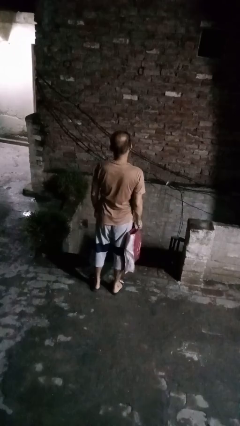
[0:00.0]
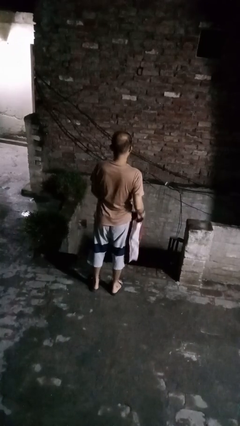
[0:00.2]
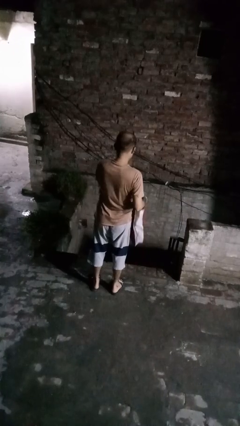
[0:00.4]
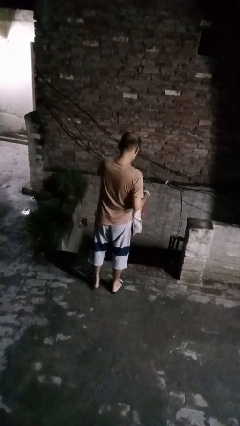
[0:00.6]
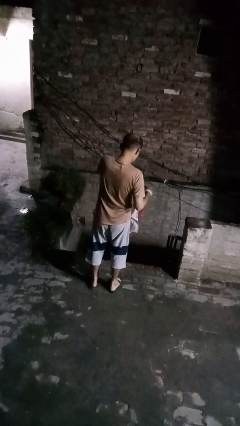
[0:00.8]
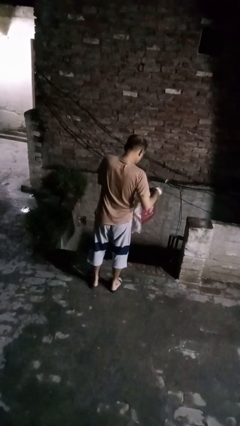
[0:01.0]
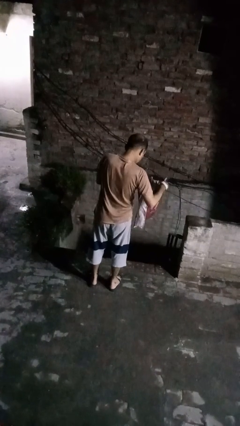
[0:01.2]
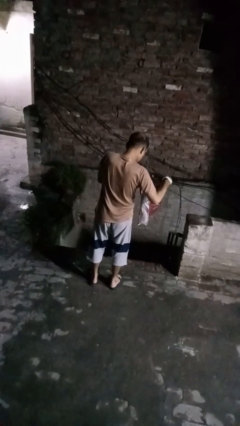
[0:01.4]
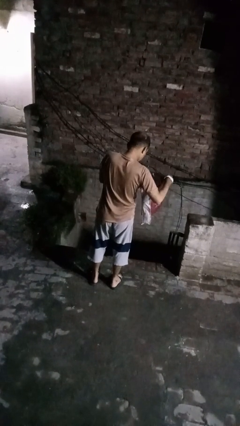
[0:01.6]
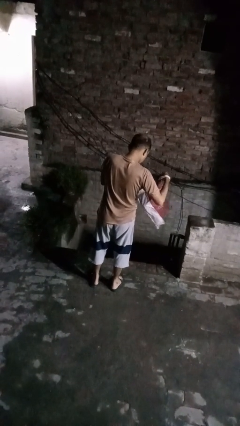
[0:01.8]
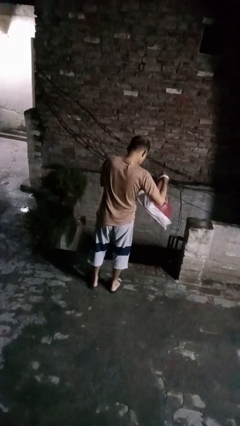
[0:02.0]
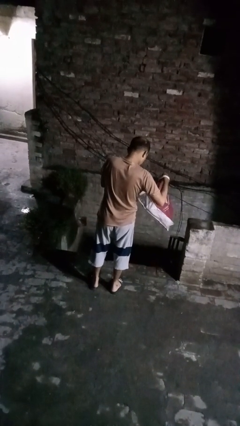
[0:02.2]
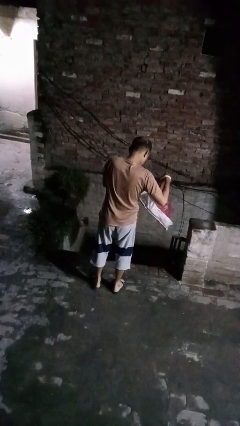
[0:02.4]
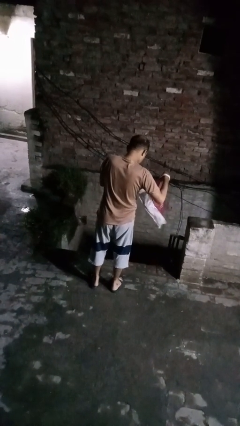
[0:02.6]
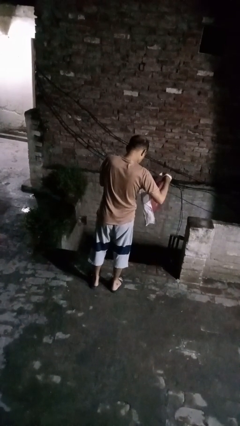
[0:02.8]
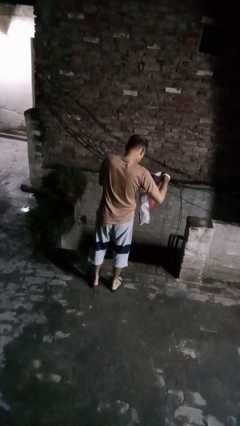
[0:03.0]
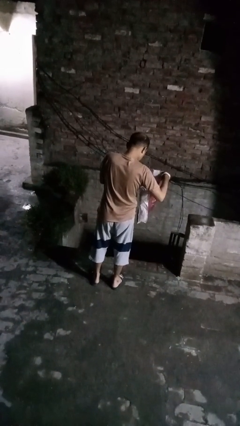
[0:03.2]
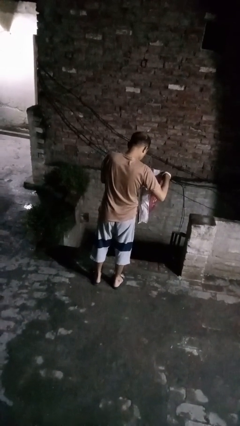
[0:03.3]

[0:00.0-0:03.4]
person searches in bag

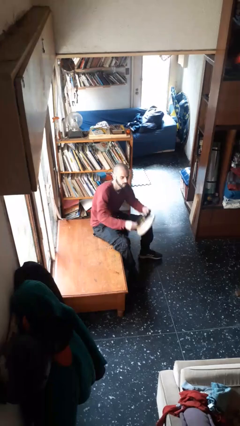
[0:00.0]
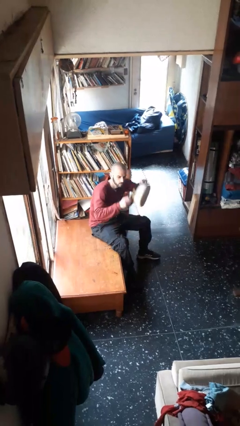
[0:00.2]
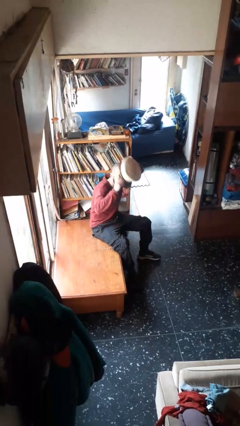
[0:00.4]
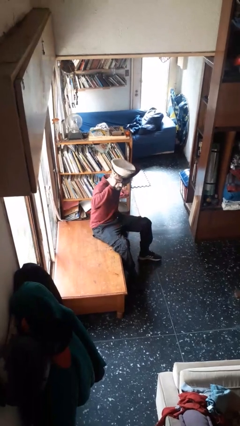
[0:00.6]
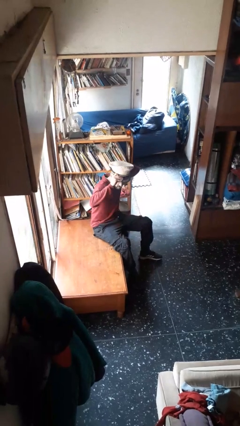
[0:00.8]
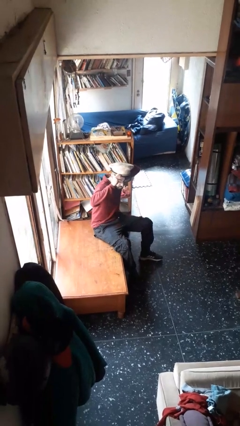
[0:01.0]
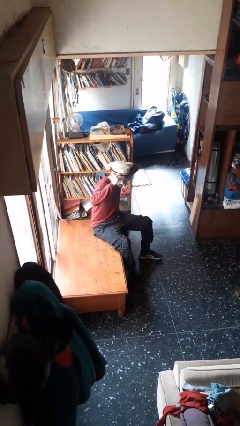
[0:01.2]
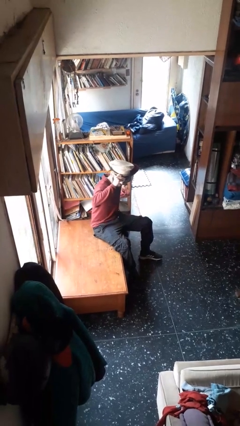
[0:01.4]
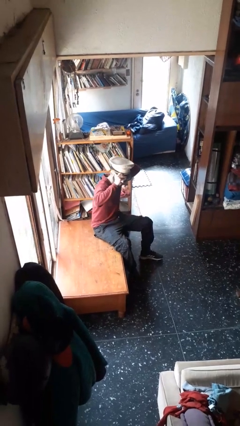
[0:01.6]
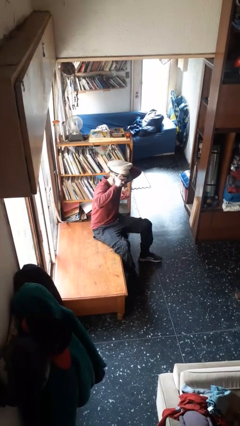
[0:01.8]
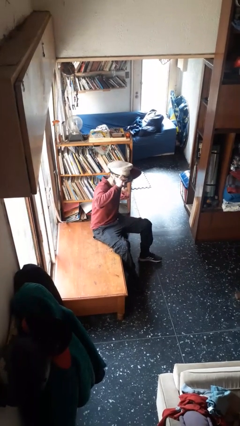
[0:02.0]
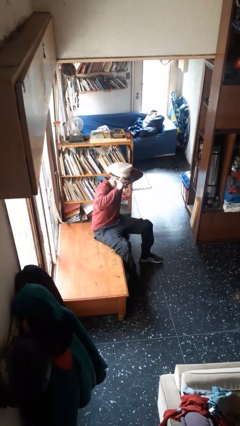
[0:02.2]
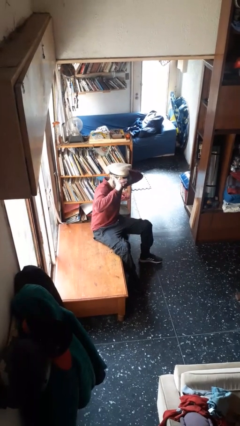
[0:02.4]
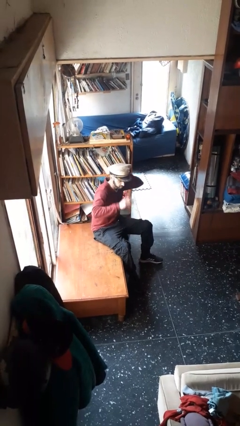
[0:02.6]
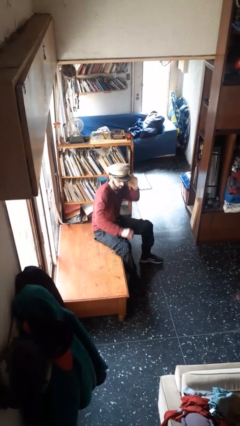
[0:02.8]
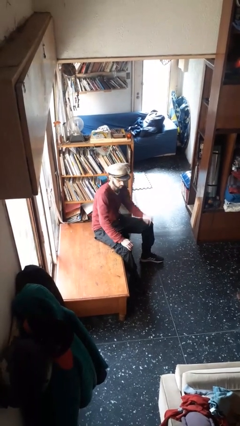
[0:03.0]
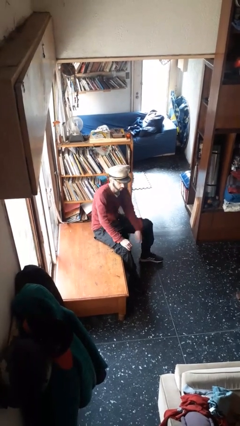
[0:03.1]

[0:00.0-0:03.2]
person puts on hat

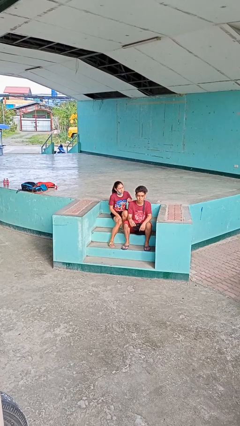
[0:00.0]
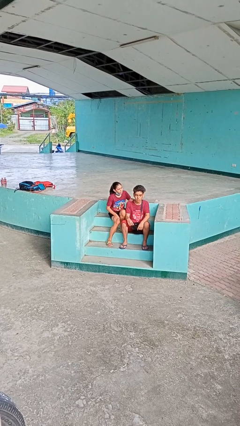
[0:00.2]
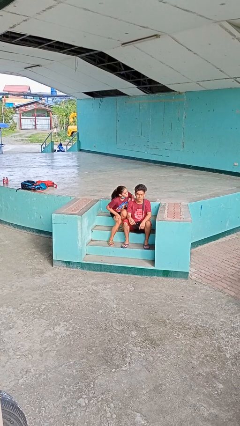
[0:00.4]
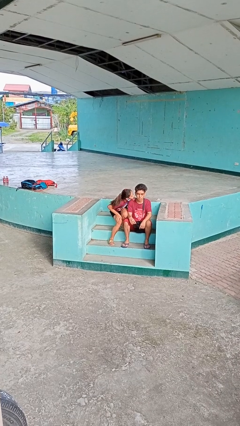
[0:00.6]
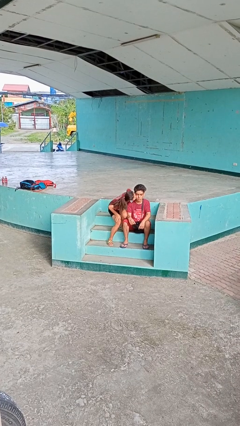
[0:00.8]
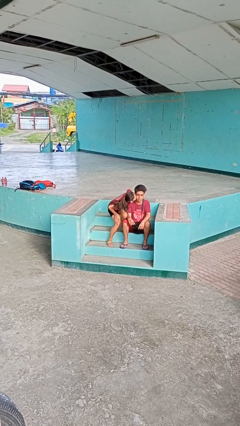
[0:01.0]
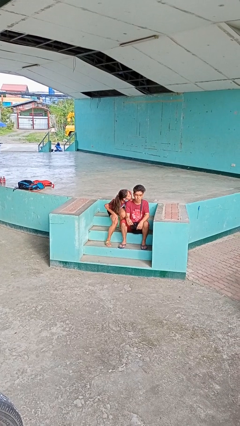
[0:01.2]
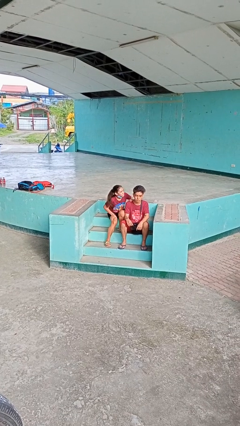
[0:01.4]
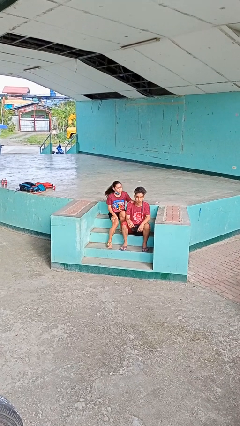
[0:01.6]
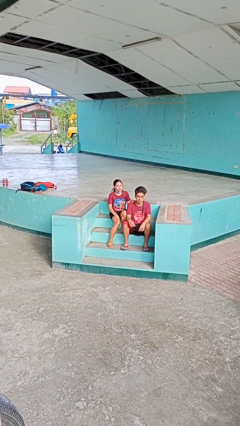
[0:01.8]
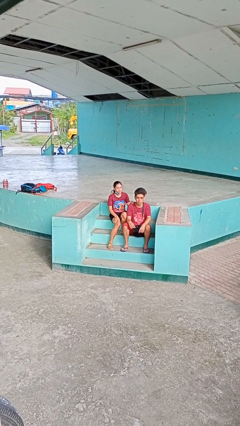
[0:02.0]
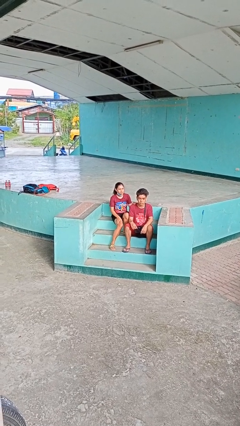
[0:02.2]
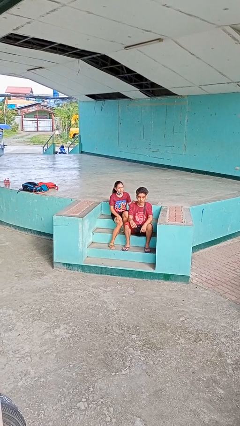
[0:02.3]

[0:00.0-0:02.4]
person kisses cheek of person

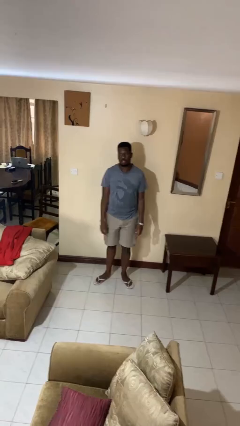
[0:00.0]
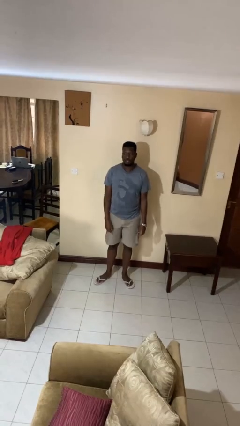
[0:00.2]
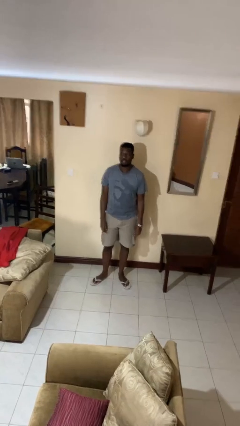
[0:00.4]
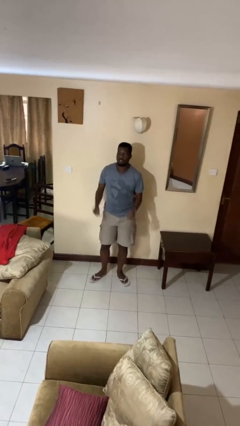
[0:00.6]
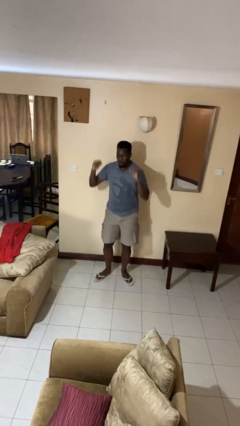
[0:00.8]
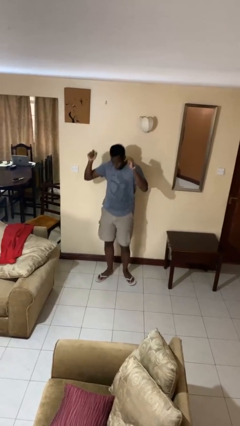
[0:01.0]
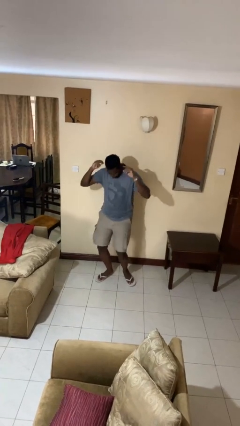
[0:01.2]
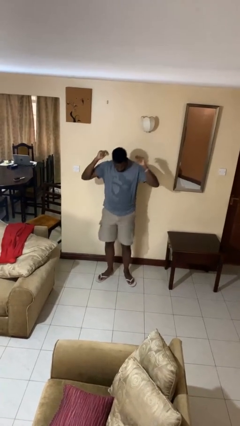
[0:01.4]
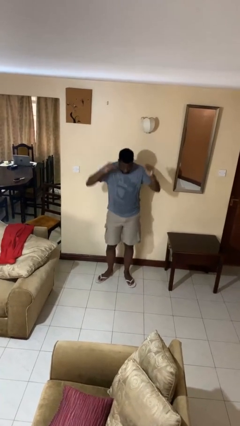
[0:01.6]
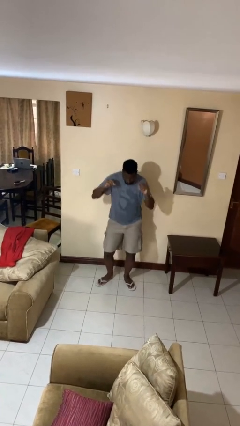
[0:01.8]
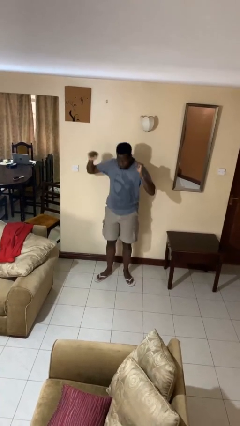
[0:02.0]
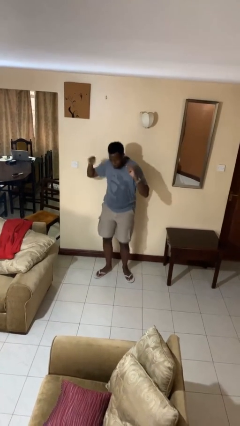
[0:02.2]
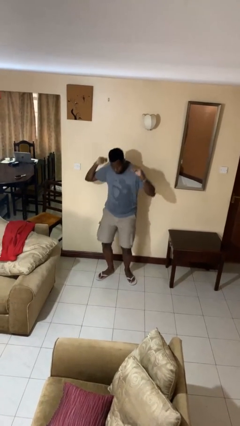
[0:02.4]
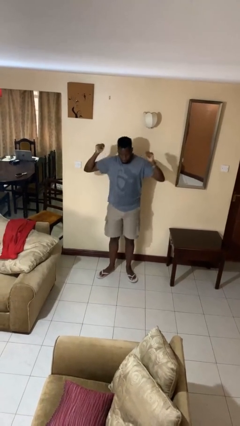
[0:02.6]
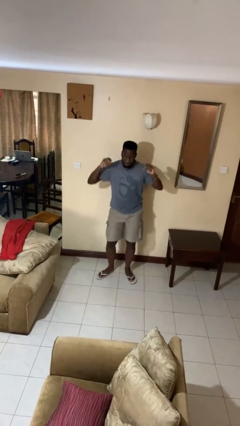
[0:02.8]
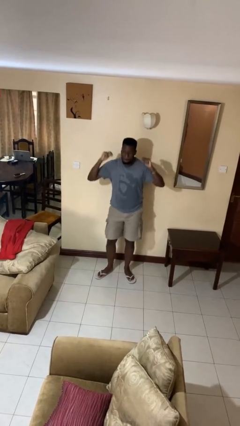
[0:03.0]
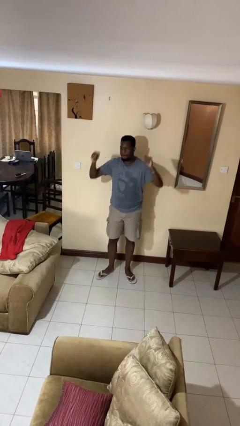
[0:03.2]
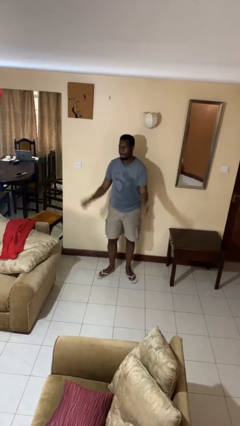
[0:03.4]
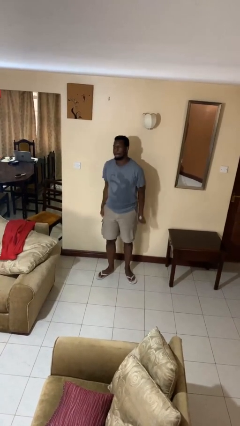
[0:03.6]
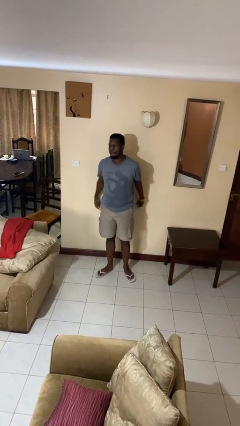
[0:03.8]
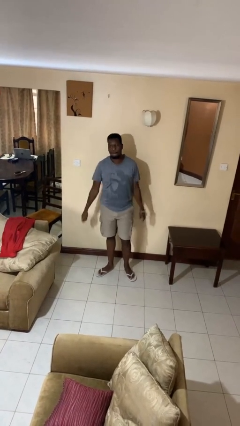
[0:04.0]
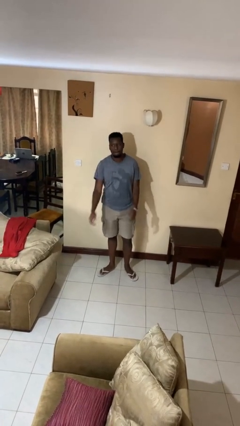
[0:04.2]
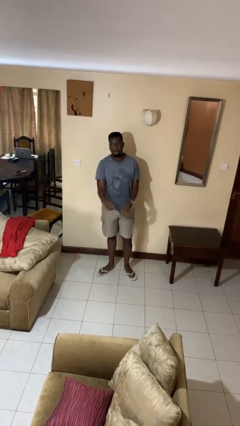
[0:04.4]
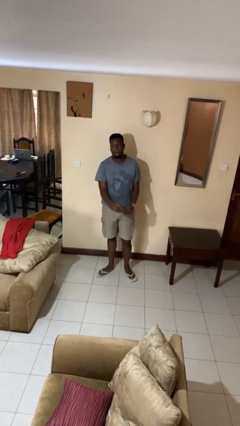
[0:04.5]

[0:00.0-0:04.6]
person dances in place

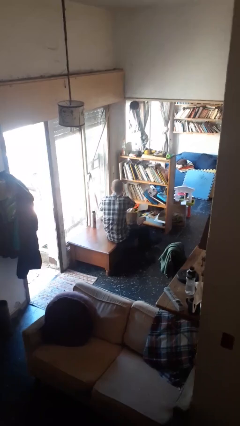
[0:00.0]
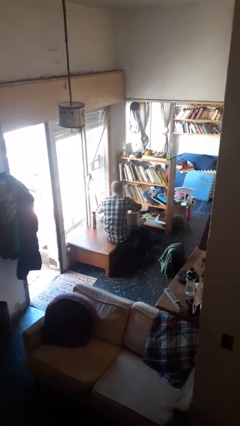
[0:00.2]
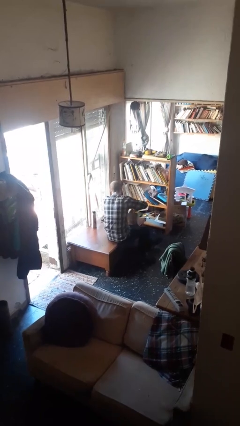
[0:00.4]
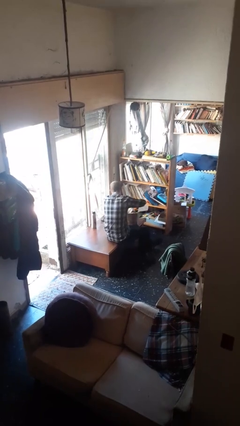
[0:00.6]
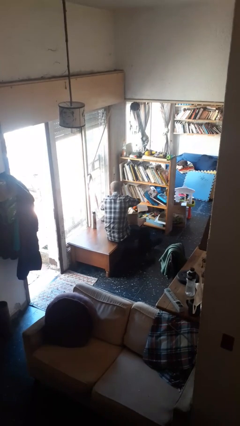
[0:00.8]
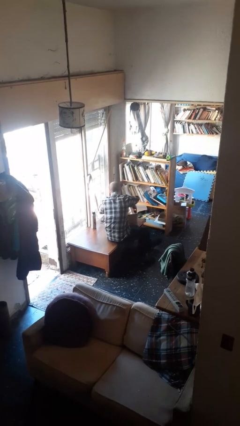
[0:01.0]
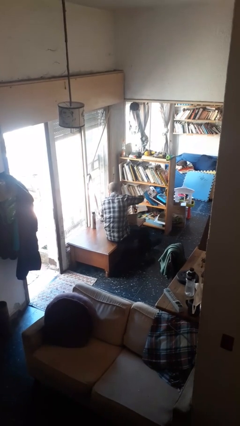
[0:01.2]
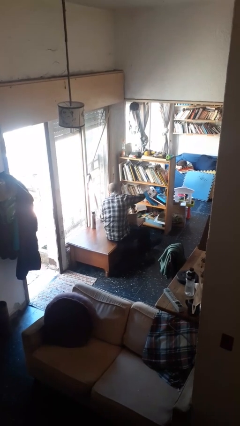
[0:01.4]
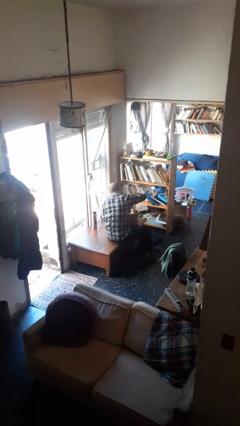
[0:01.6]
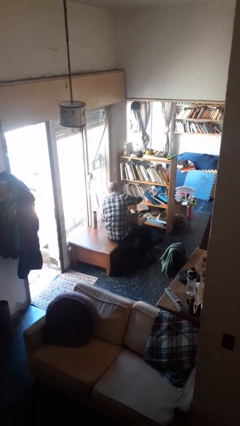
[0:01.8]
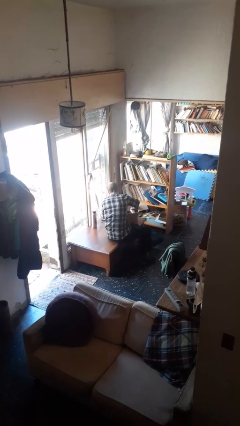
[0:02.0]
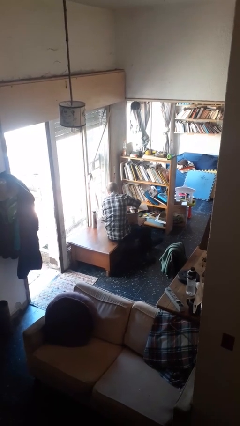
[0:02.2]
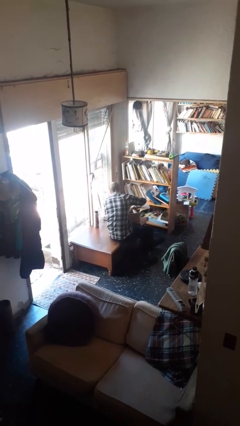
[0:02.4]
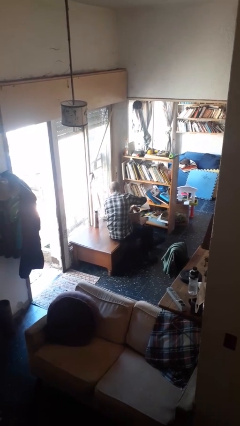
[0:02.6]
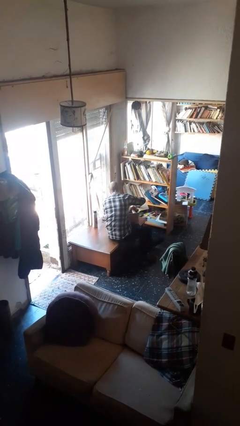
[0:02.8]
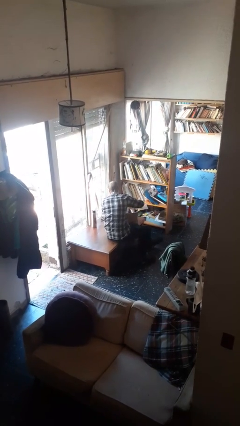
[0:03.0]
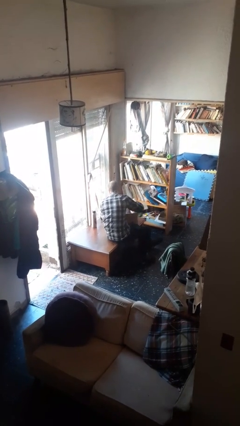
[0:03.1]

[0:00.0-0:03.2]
person searches in box

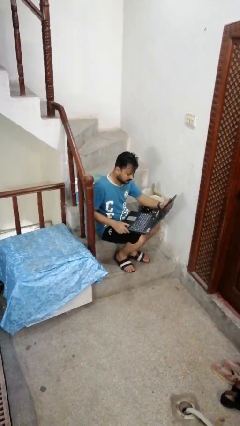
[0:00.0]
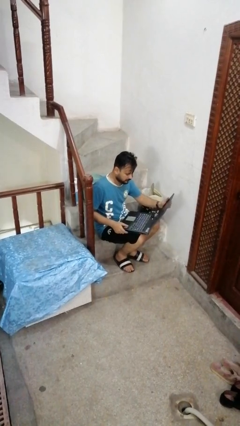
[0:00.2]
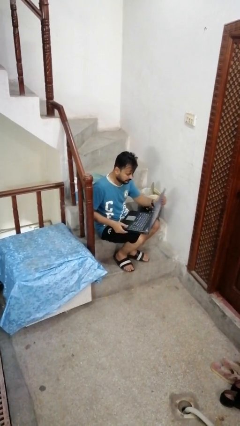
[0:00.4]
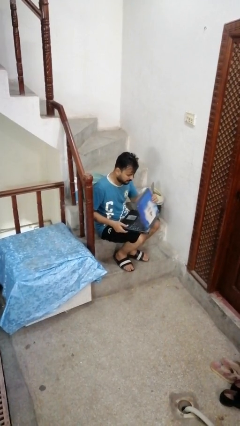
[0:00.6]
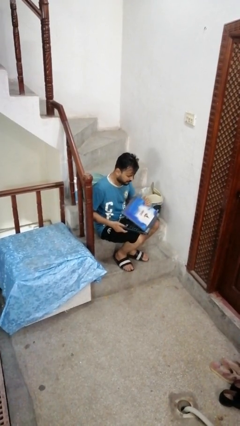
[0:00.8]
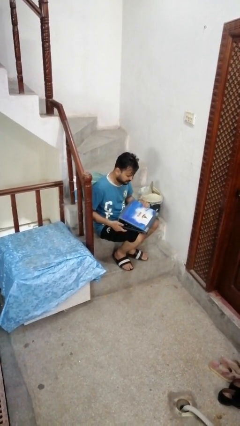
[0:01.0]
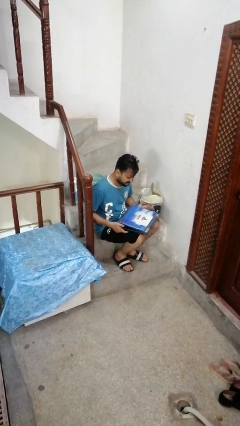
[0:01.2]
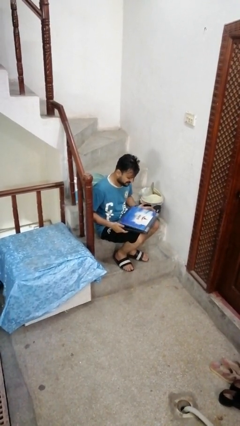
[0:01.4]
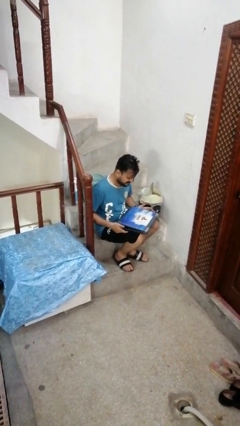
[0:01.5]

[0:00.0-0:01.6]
person closes laptop
